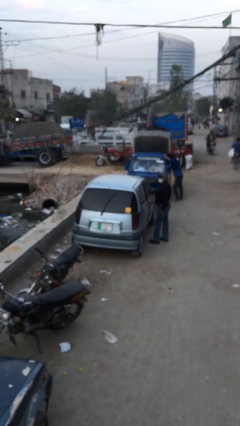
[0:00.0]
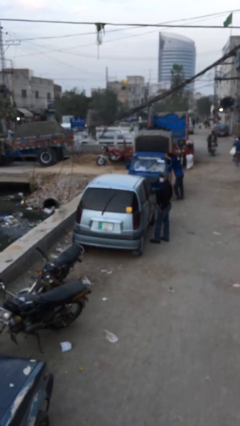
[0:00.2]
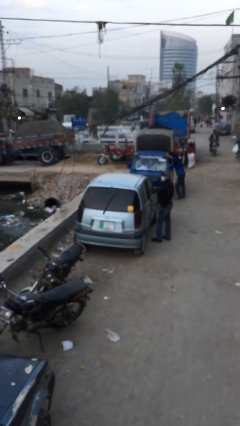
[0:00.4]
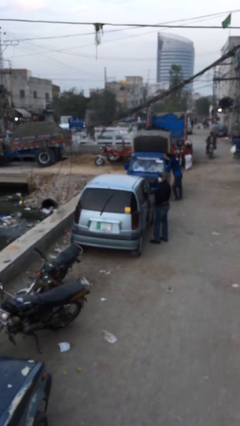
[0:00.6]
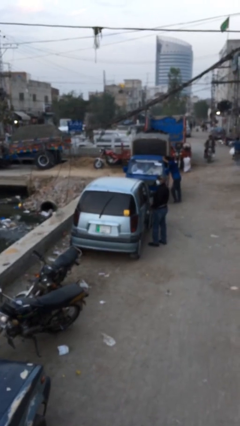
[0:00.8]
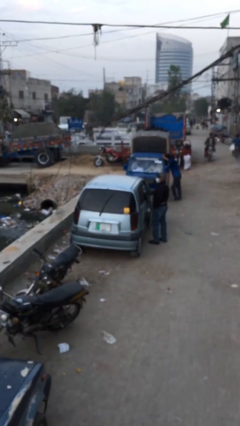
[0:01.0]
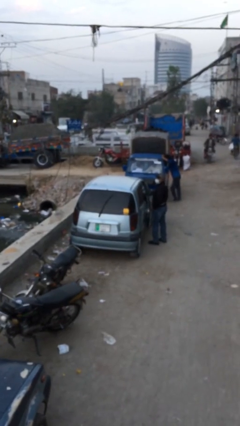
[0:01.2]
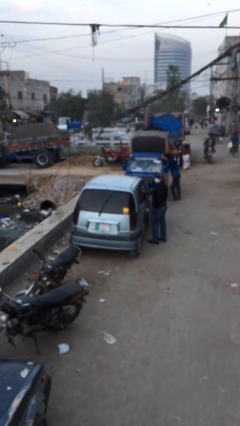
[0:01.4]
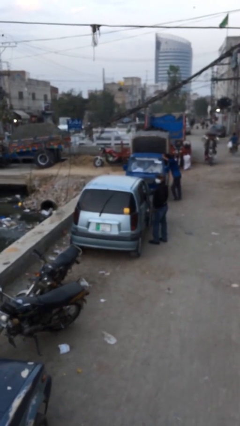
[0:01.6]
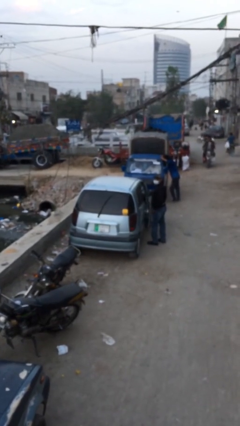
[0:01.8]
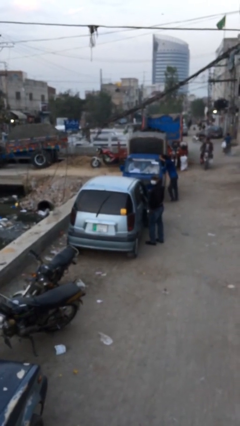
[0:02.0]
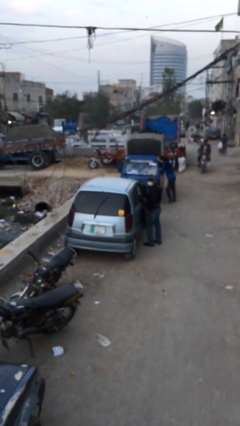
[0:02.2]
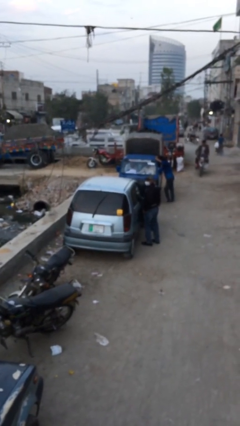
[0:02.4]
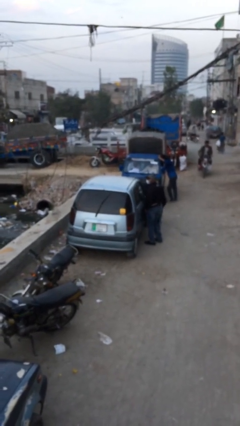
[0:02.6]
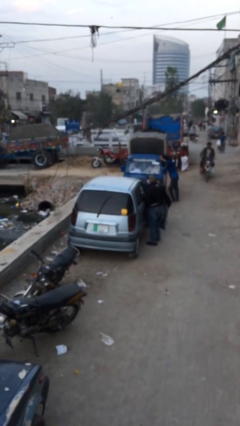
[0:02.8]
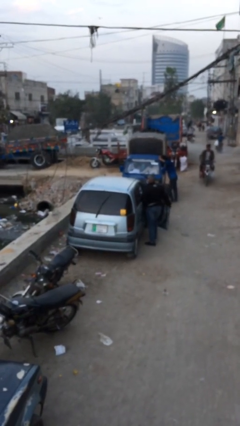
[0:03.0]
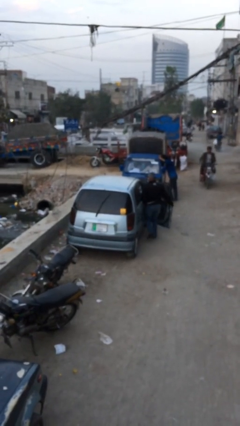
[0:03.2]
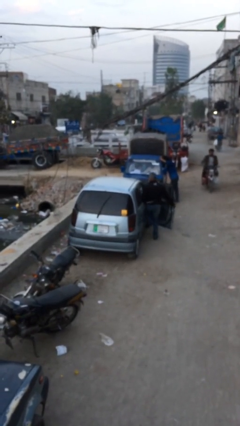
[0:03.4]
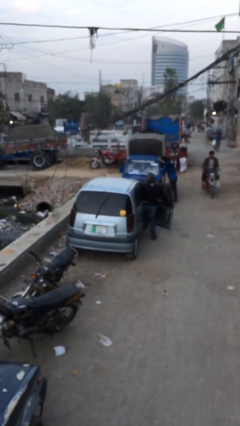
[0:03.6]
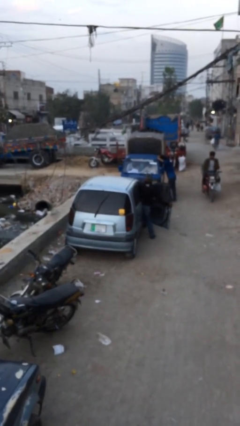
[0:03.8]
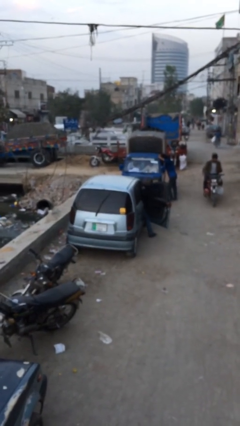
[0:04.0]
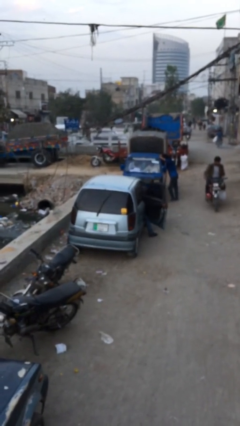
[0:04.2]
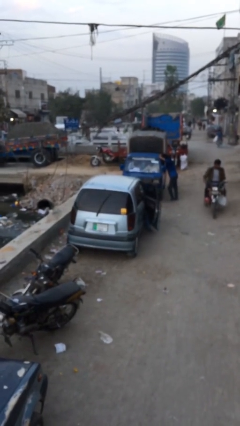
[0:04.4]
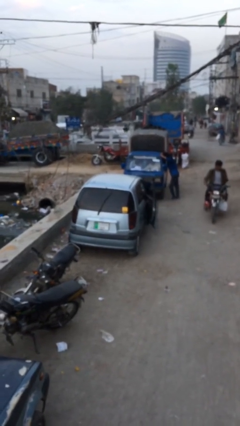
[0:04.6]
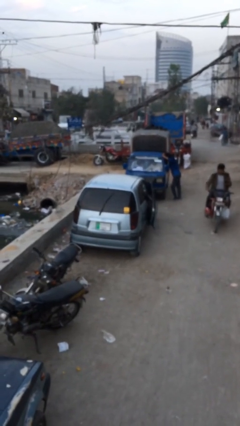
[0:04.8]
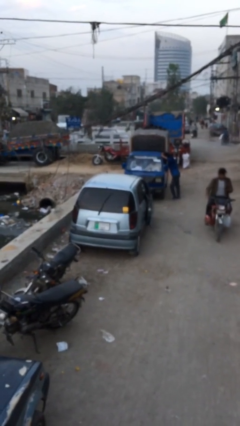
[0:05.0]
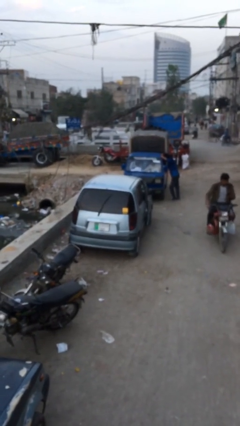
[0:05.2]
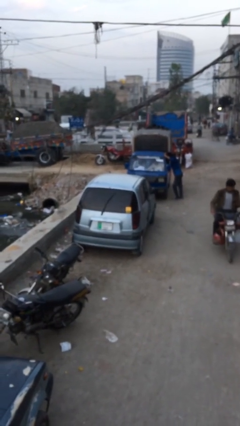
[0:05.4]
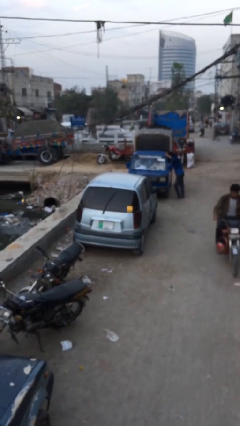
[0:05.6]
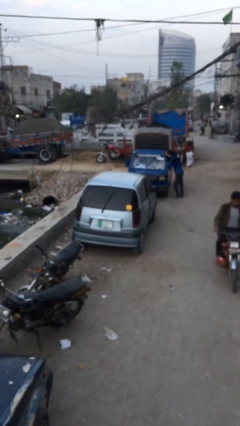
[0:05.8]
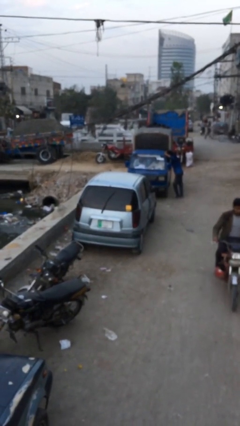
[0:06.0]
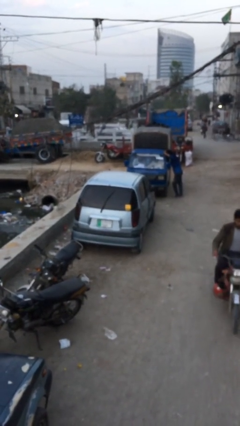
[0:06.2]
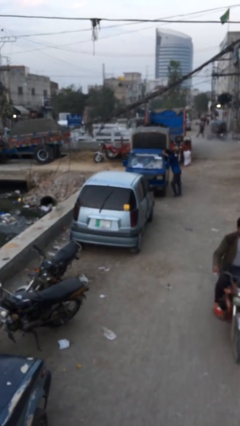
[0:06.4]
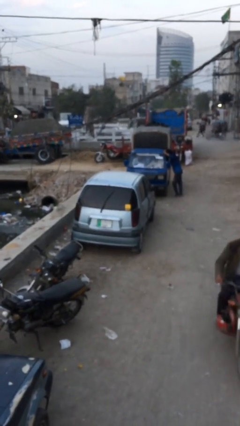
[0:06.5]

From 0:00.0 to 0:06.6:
car picks up person

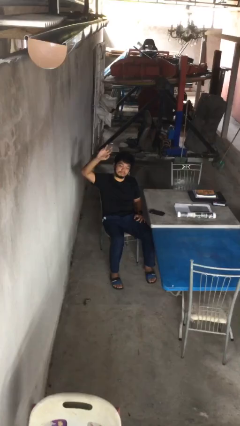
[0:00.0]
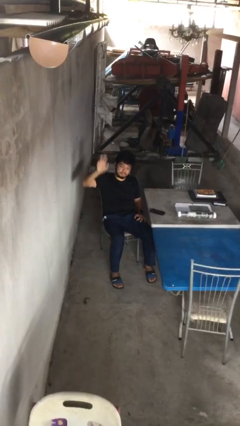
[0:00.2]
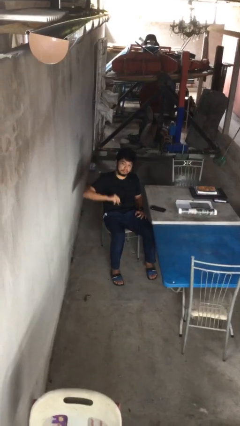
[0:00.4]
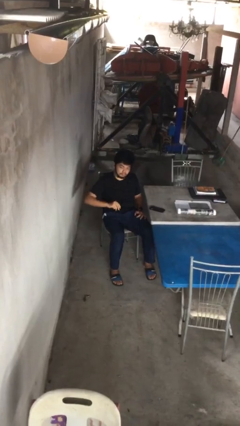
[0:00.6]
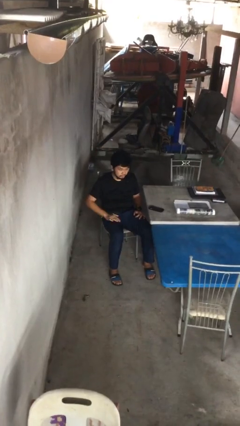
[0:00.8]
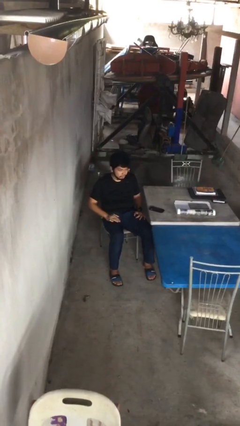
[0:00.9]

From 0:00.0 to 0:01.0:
person gestures swipe down

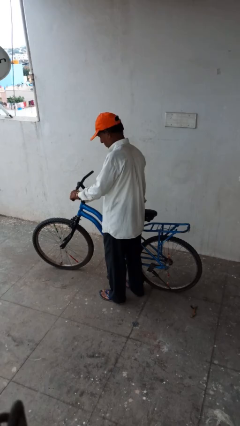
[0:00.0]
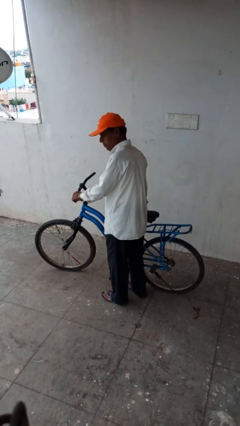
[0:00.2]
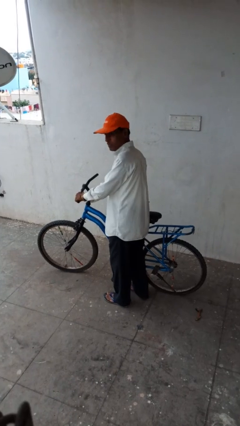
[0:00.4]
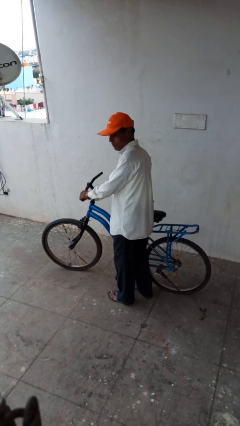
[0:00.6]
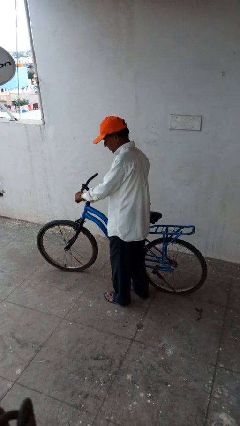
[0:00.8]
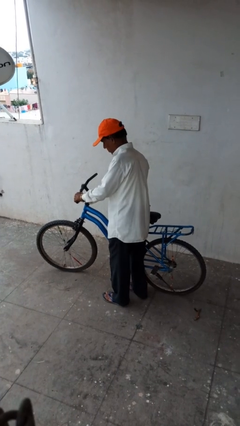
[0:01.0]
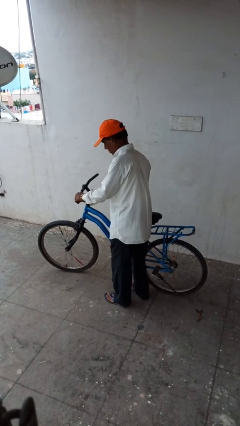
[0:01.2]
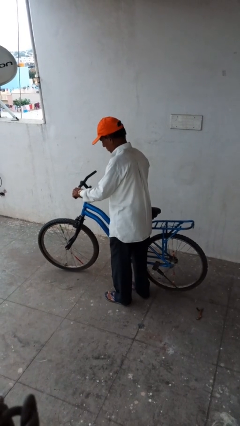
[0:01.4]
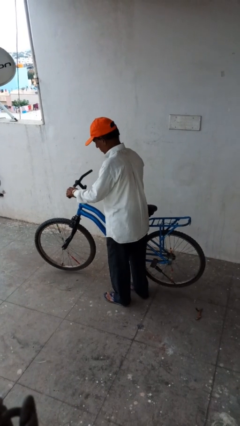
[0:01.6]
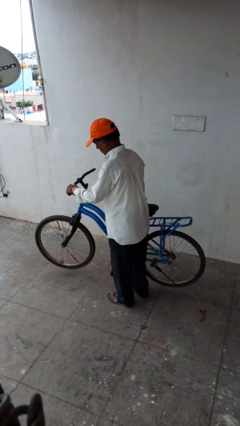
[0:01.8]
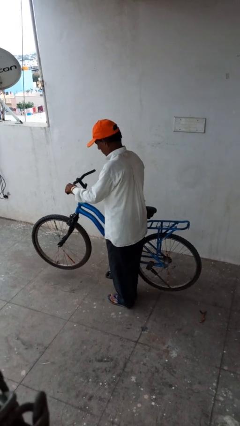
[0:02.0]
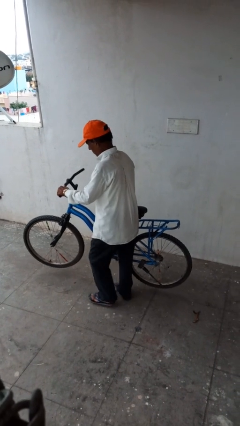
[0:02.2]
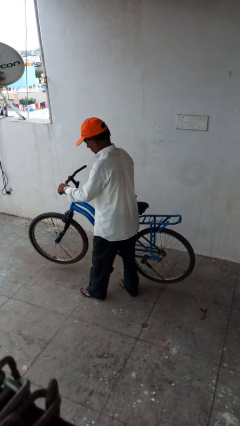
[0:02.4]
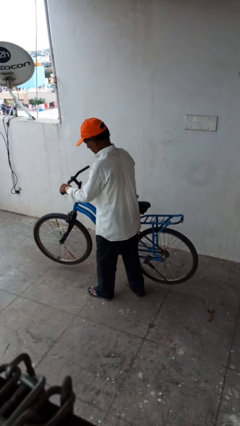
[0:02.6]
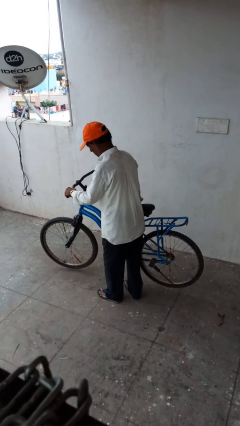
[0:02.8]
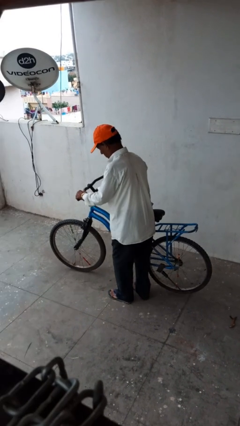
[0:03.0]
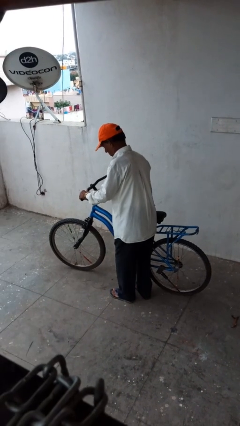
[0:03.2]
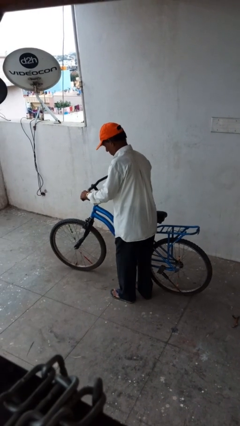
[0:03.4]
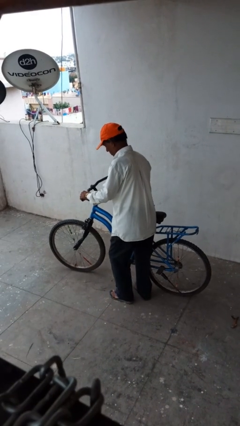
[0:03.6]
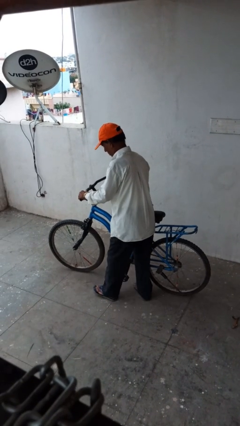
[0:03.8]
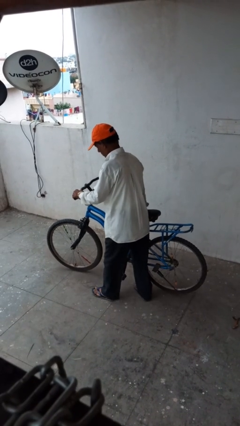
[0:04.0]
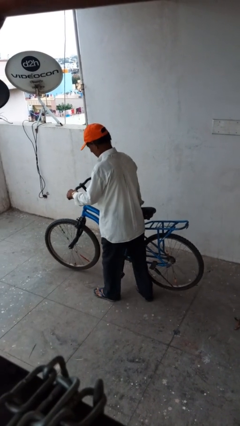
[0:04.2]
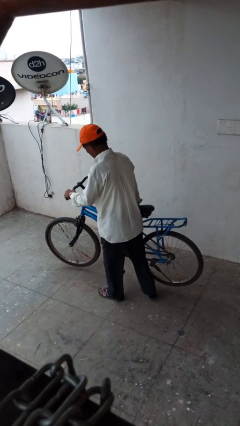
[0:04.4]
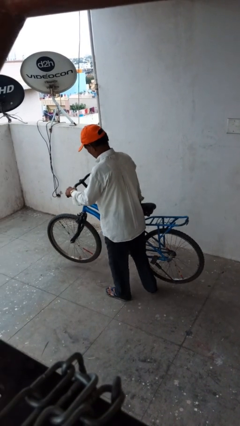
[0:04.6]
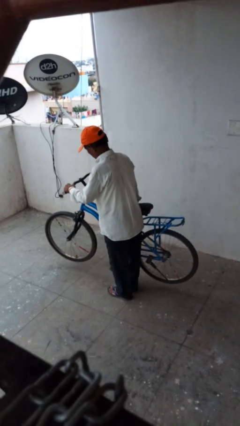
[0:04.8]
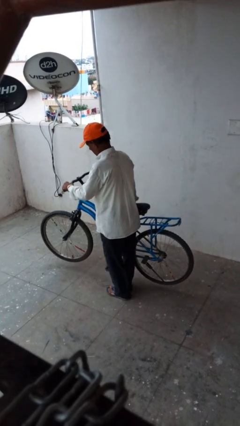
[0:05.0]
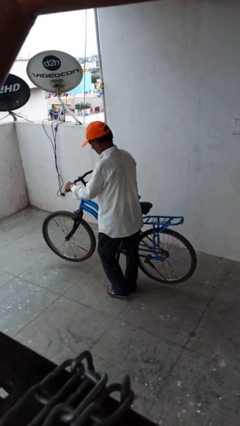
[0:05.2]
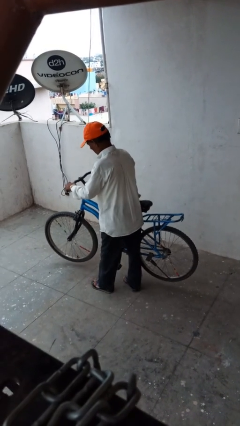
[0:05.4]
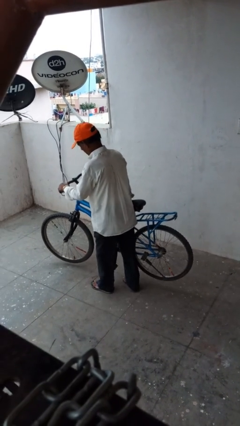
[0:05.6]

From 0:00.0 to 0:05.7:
person carries bicycle

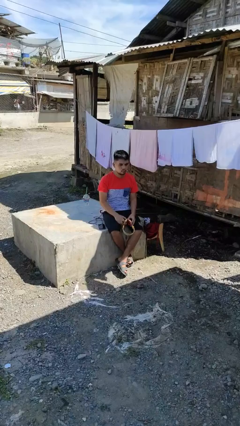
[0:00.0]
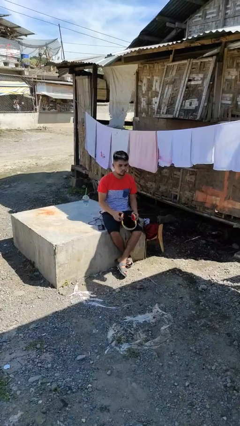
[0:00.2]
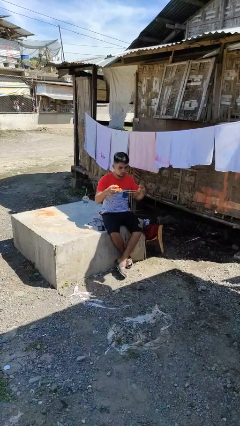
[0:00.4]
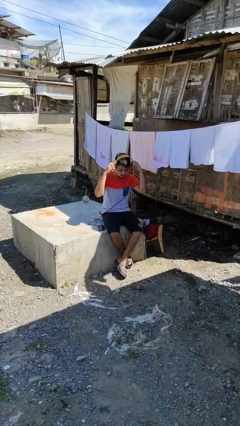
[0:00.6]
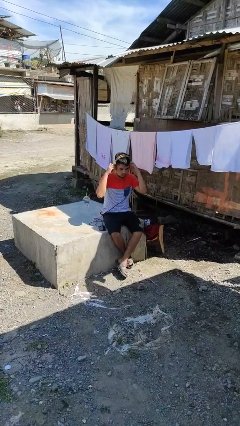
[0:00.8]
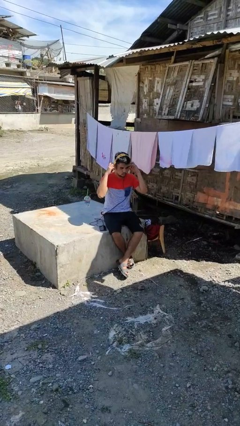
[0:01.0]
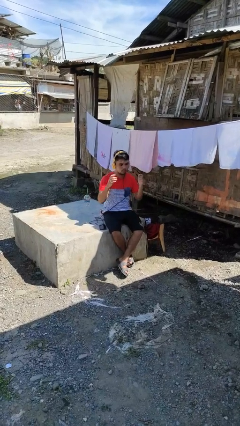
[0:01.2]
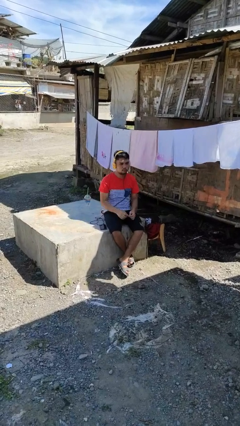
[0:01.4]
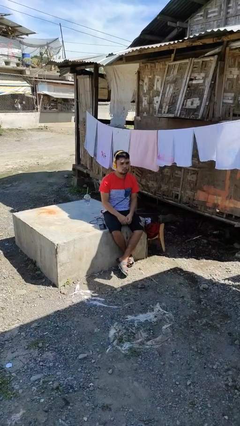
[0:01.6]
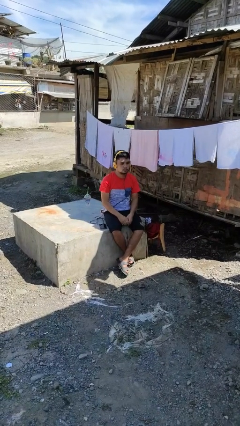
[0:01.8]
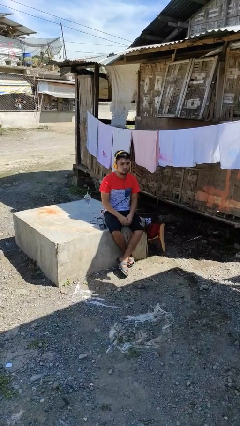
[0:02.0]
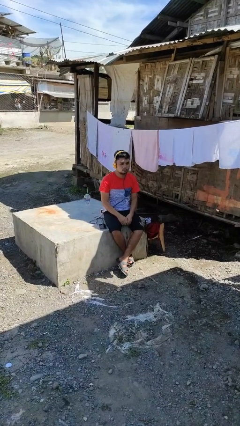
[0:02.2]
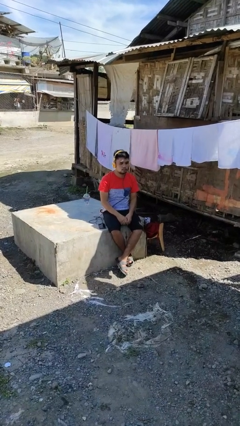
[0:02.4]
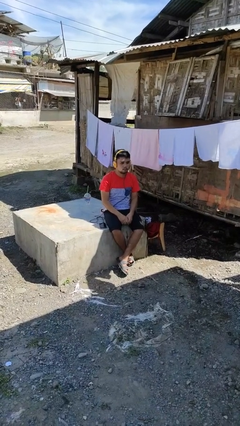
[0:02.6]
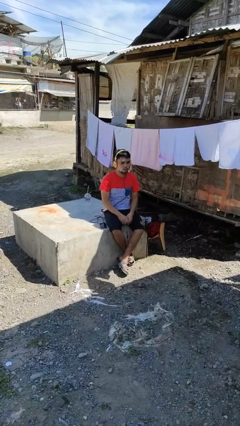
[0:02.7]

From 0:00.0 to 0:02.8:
person puts on headphones

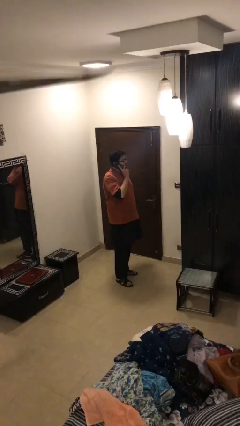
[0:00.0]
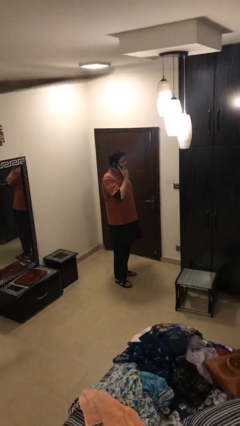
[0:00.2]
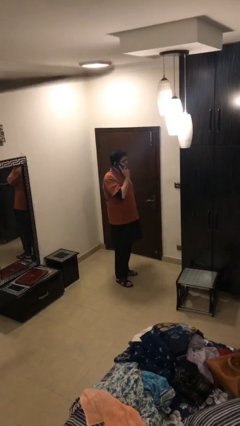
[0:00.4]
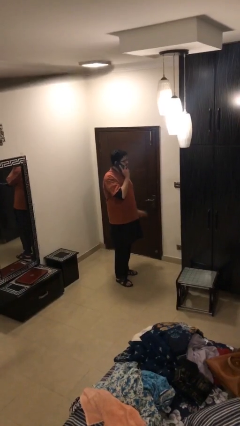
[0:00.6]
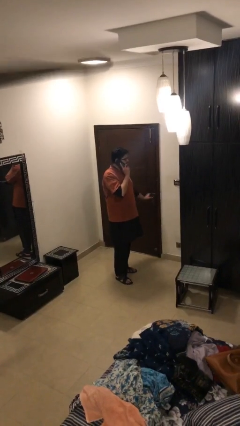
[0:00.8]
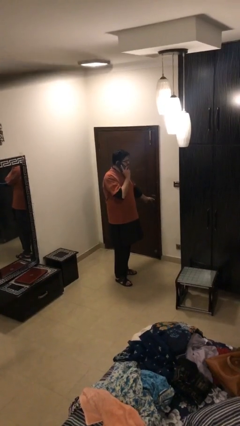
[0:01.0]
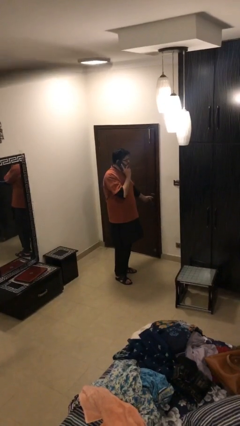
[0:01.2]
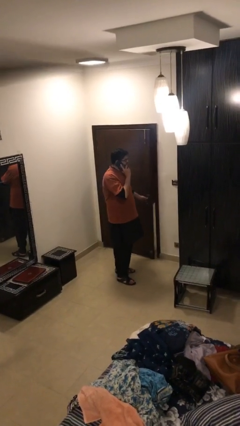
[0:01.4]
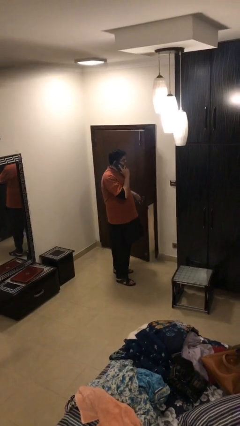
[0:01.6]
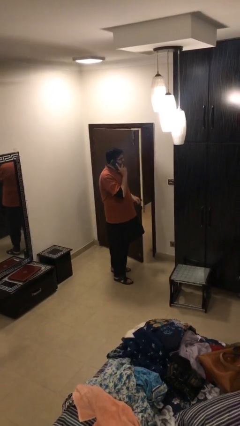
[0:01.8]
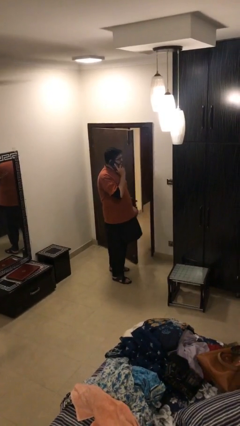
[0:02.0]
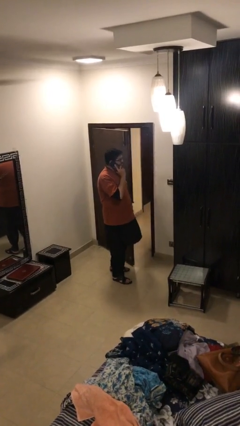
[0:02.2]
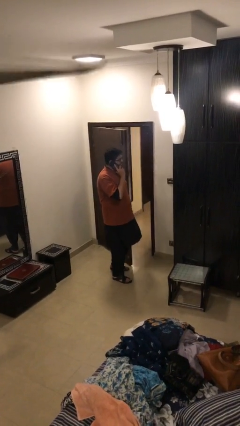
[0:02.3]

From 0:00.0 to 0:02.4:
person opens facility door
